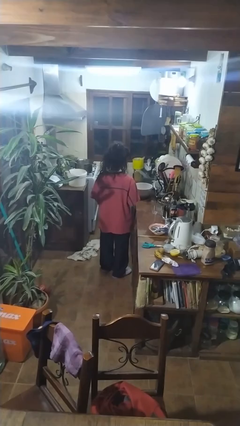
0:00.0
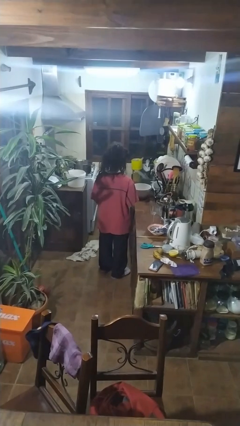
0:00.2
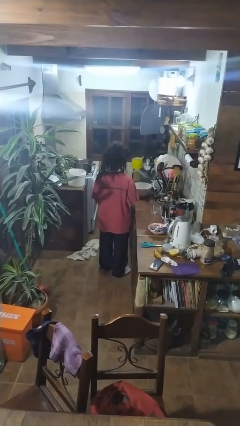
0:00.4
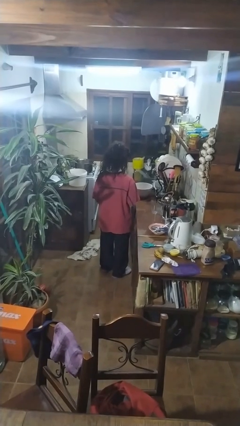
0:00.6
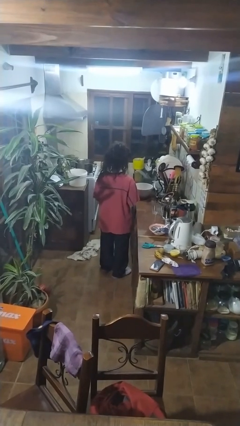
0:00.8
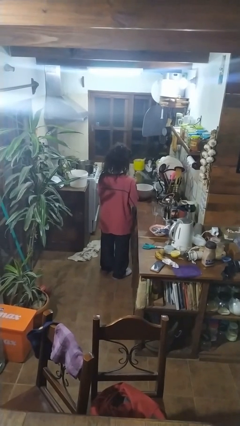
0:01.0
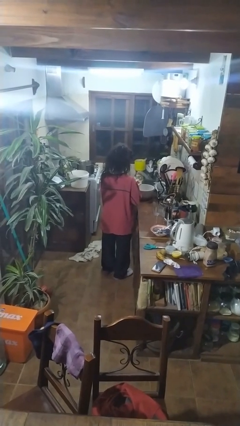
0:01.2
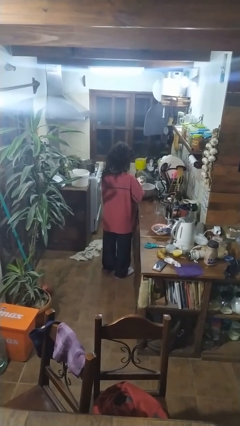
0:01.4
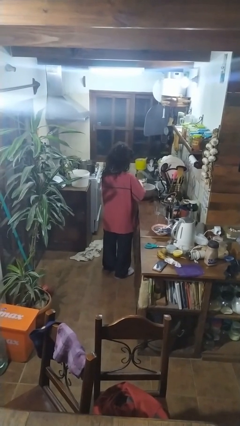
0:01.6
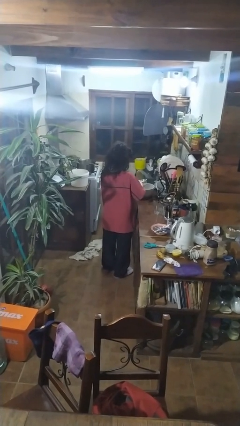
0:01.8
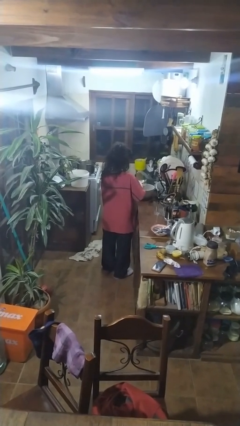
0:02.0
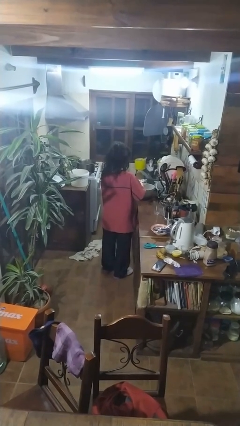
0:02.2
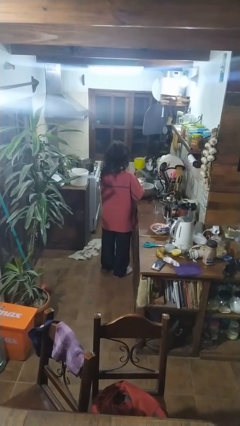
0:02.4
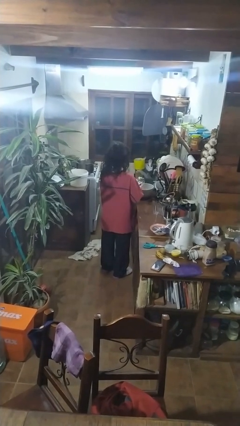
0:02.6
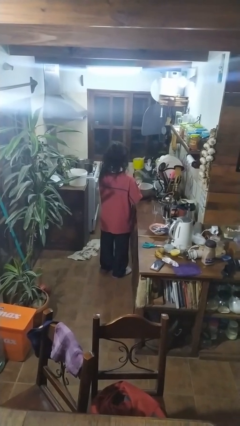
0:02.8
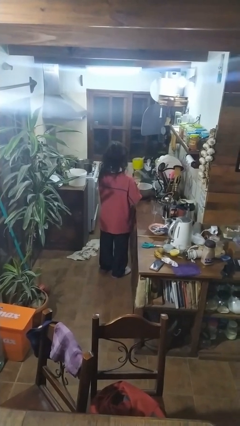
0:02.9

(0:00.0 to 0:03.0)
person pours into bowl

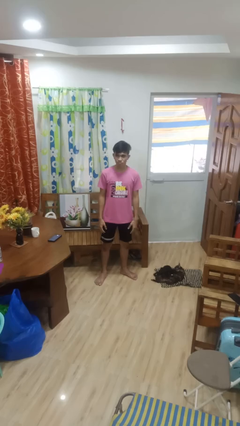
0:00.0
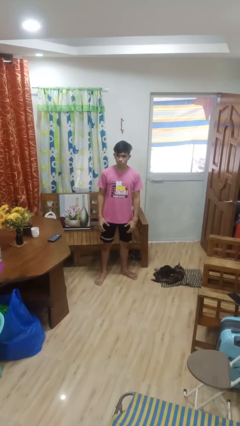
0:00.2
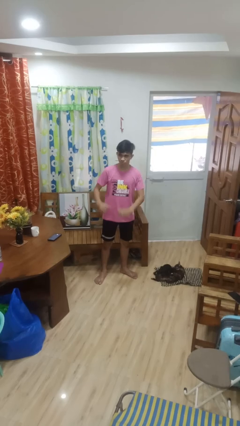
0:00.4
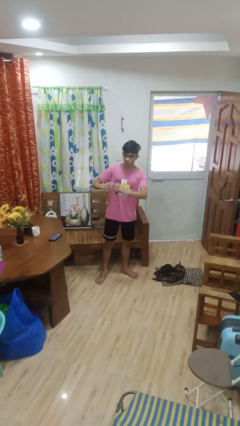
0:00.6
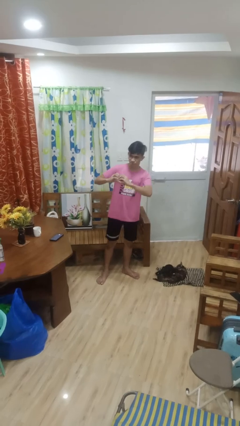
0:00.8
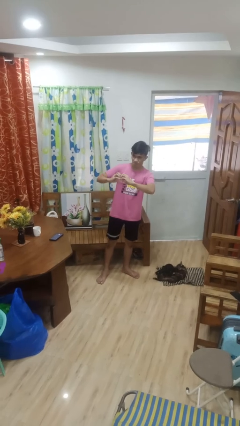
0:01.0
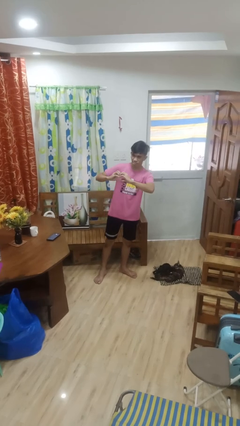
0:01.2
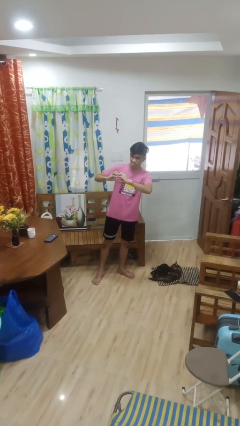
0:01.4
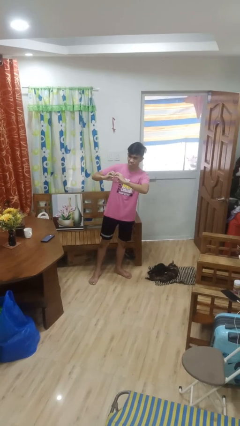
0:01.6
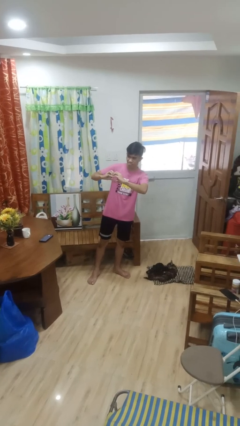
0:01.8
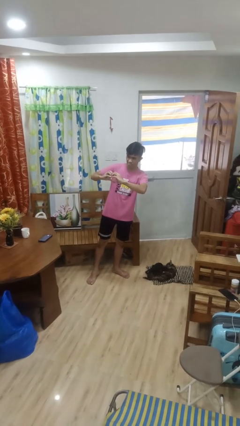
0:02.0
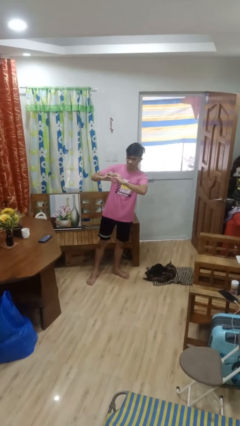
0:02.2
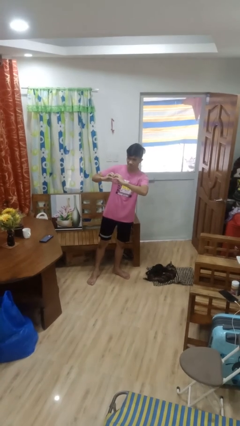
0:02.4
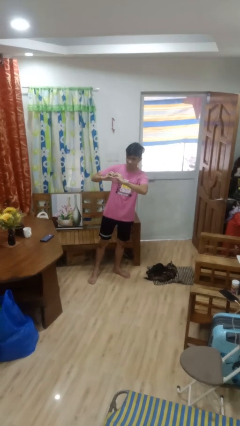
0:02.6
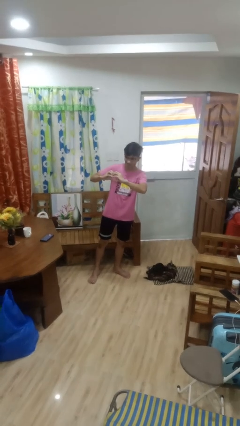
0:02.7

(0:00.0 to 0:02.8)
person gestures heart

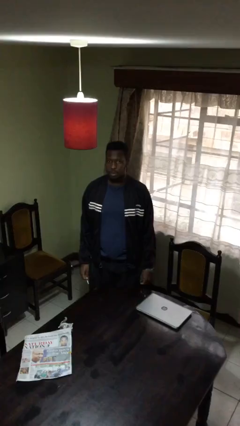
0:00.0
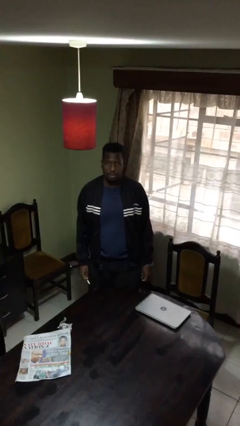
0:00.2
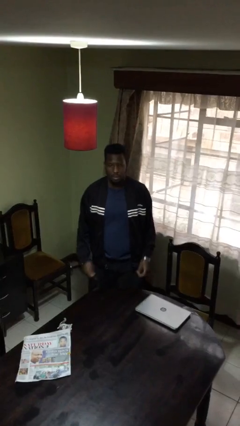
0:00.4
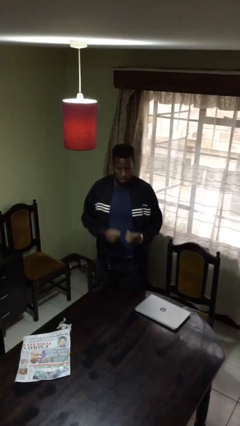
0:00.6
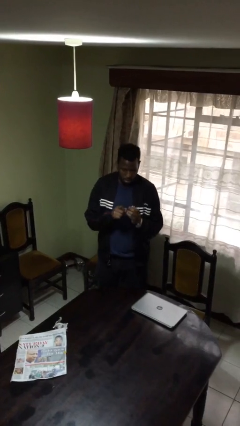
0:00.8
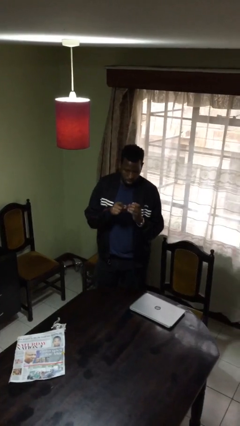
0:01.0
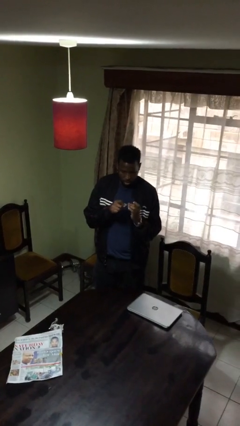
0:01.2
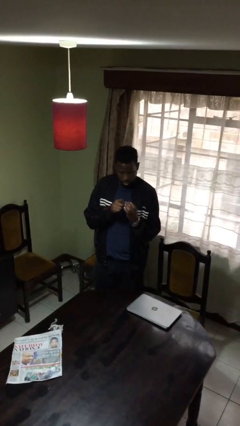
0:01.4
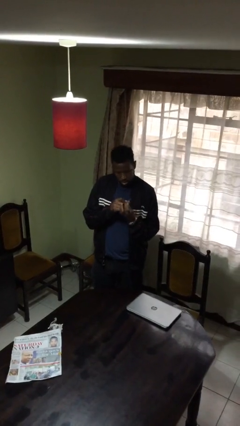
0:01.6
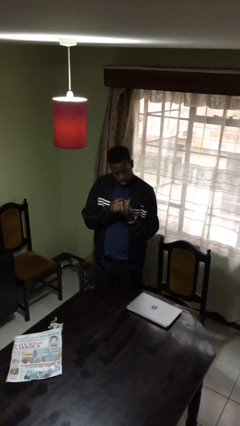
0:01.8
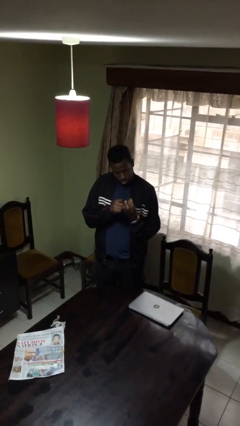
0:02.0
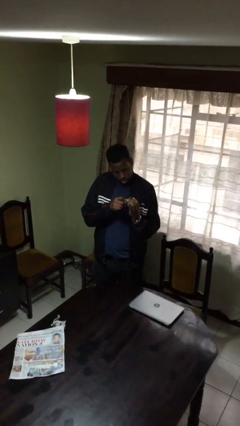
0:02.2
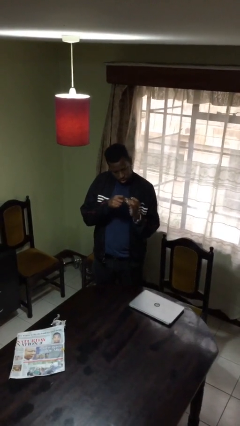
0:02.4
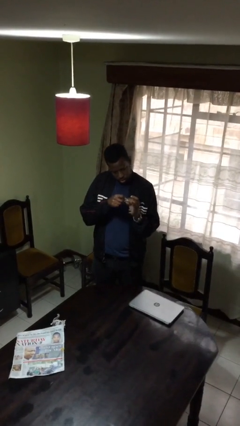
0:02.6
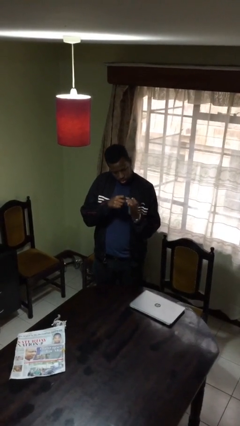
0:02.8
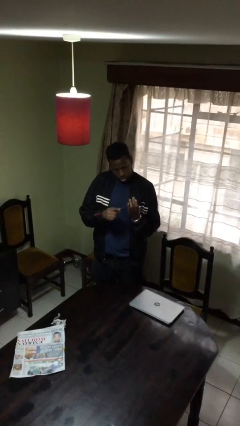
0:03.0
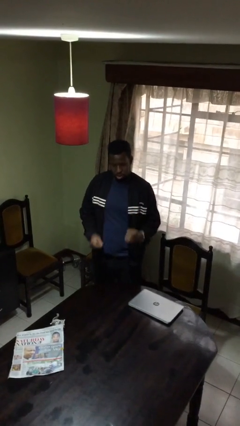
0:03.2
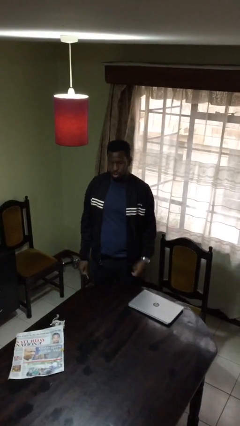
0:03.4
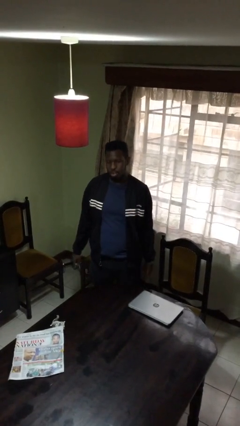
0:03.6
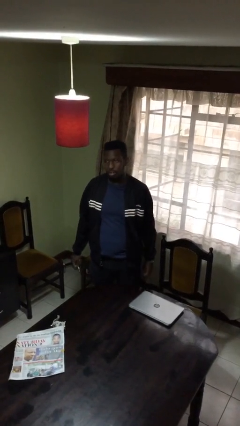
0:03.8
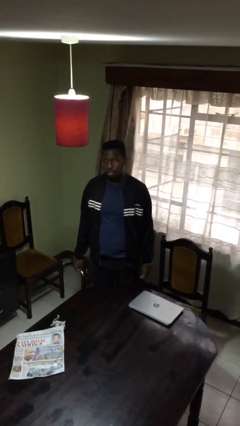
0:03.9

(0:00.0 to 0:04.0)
person files fingernails

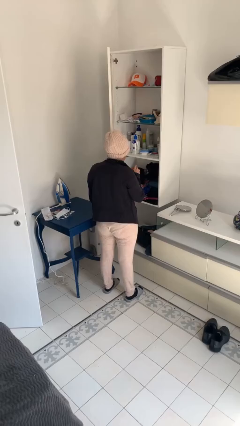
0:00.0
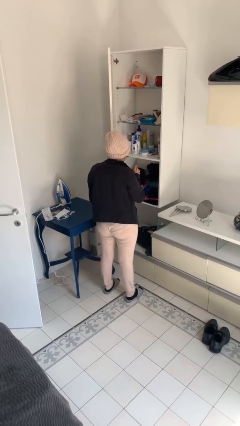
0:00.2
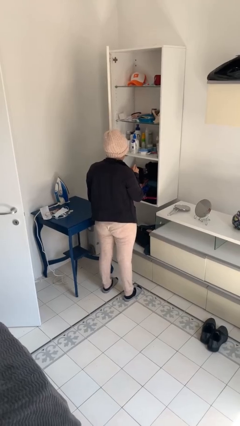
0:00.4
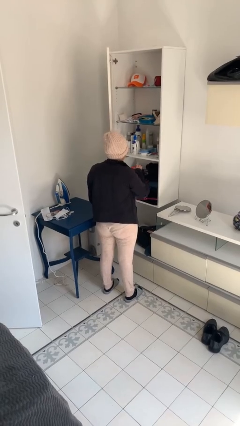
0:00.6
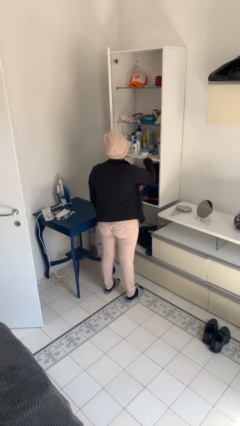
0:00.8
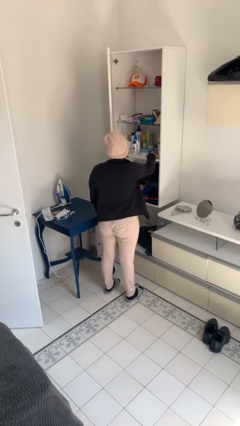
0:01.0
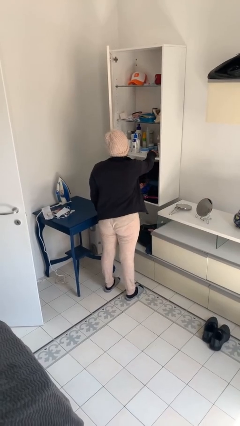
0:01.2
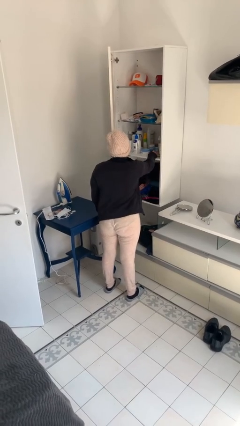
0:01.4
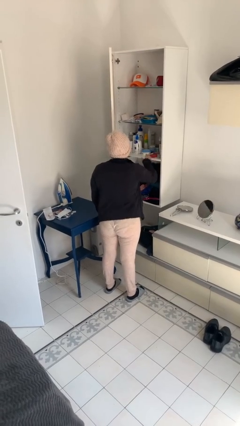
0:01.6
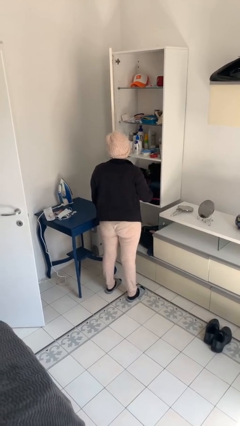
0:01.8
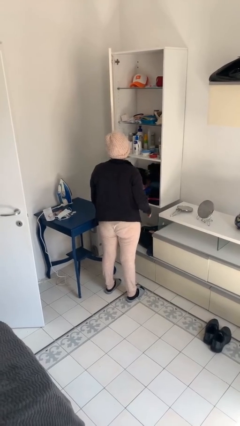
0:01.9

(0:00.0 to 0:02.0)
person puts down object on shelf

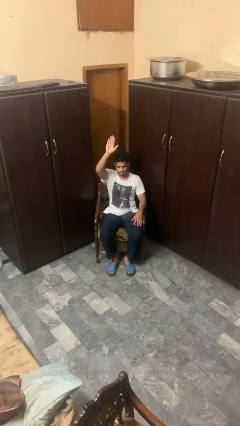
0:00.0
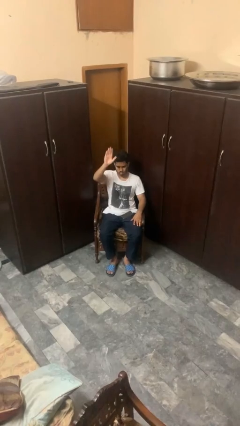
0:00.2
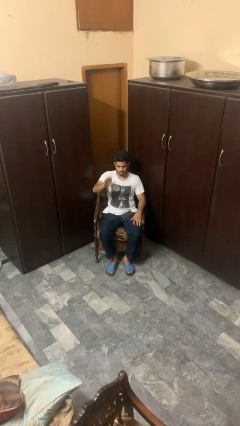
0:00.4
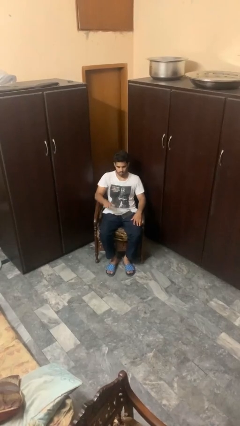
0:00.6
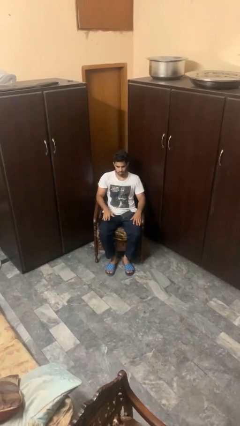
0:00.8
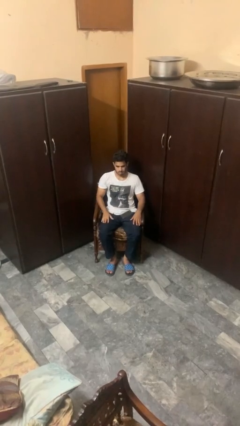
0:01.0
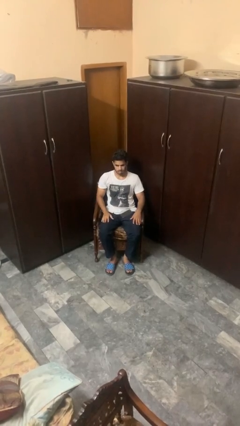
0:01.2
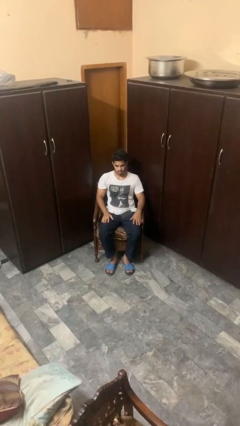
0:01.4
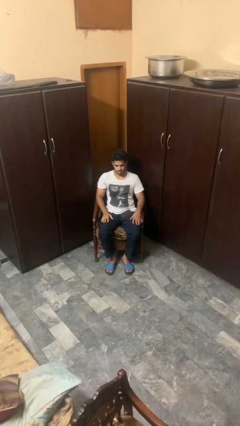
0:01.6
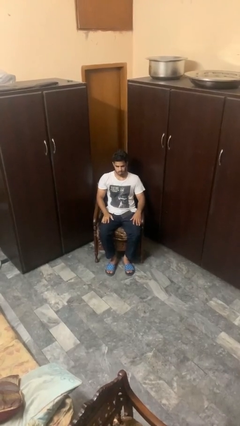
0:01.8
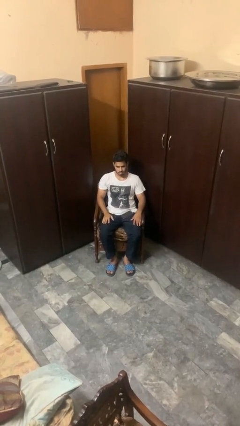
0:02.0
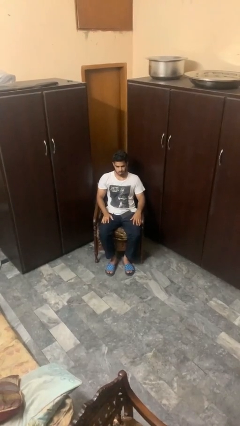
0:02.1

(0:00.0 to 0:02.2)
person gestures lower hand

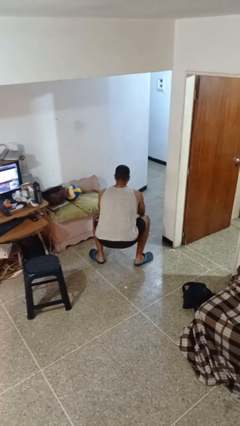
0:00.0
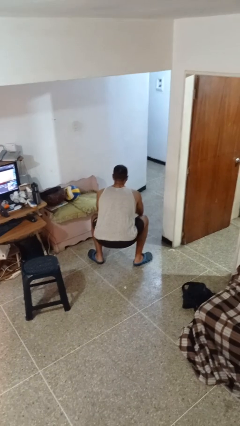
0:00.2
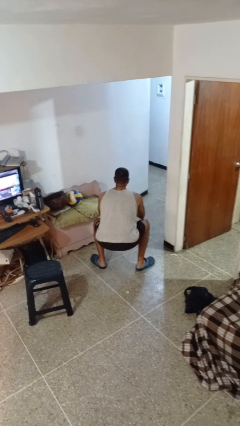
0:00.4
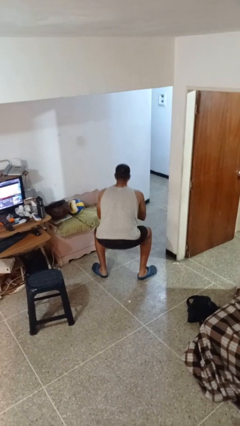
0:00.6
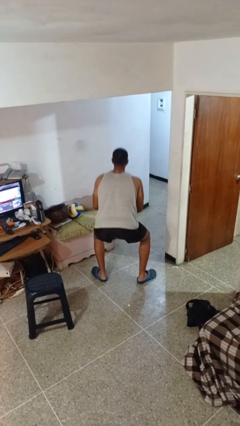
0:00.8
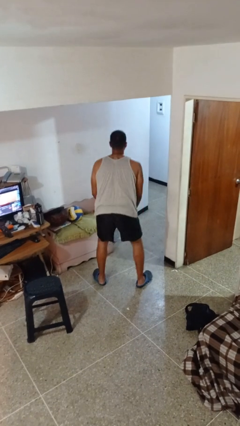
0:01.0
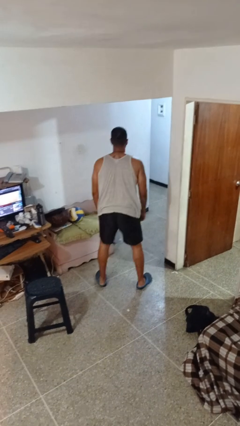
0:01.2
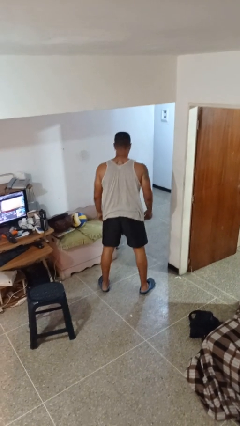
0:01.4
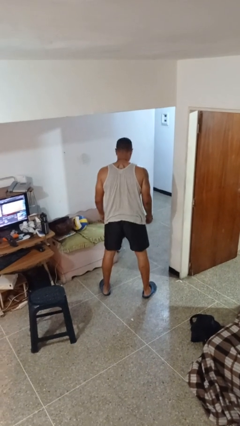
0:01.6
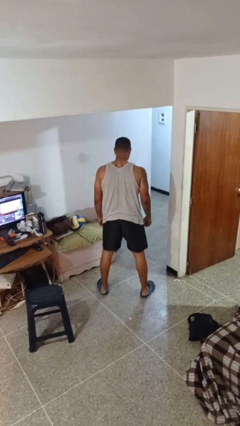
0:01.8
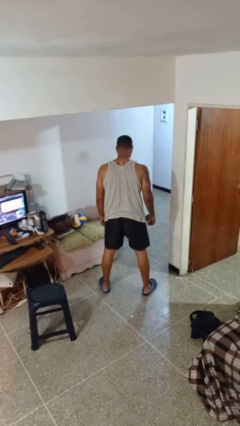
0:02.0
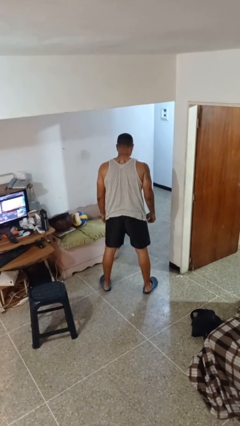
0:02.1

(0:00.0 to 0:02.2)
person stands up

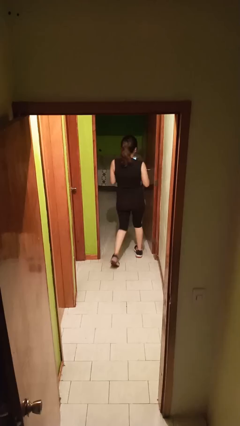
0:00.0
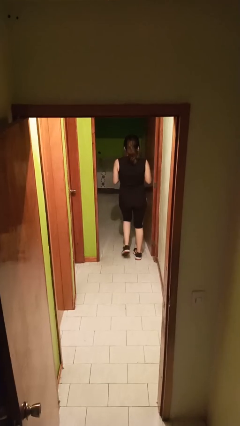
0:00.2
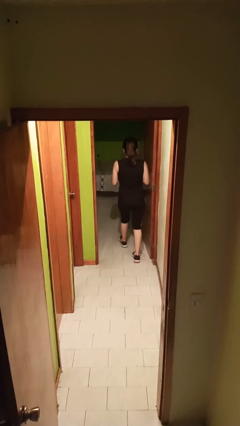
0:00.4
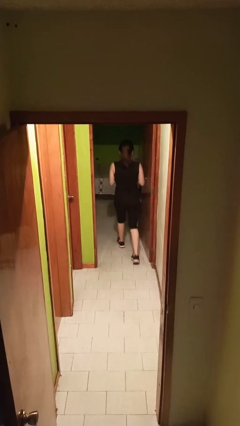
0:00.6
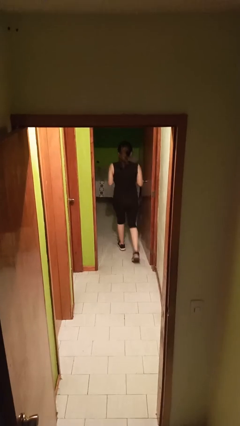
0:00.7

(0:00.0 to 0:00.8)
person exits scene through structure

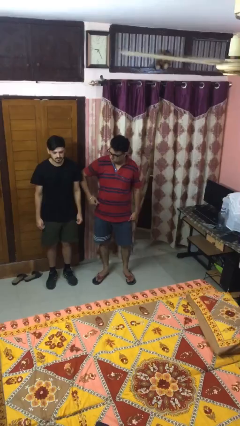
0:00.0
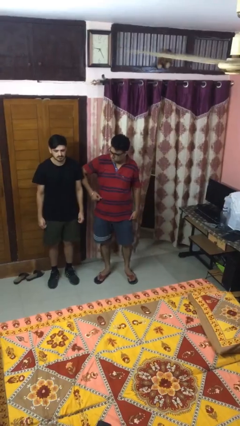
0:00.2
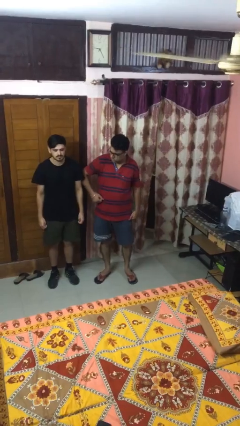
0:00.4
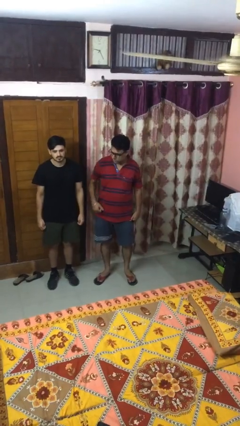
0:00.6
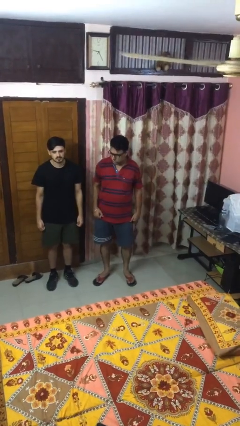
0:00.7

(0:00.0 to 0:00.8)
person nudges person with elbow
